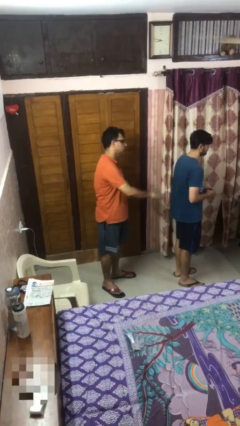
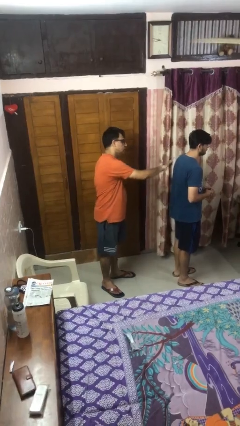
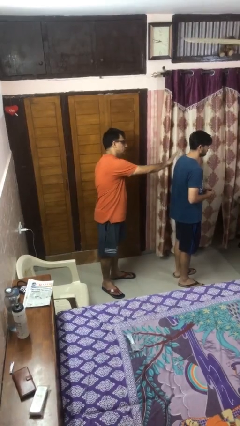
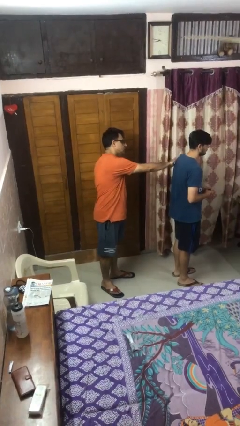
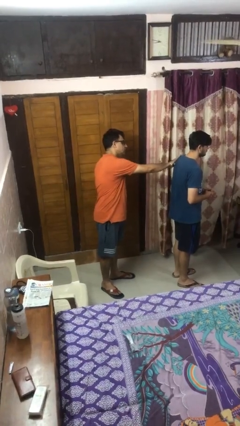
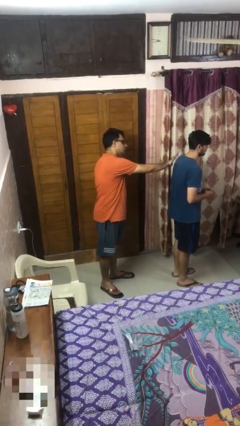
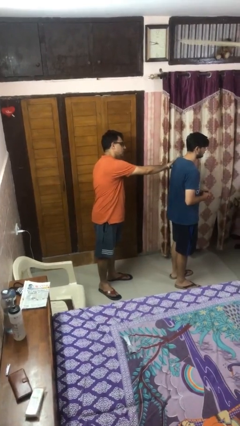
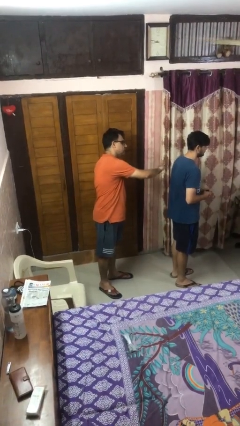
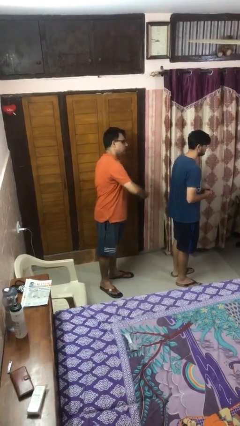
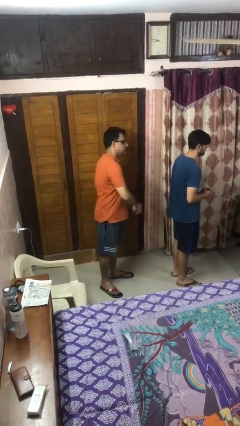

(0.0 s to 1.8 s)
person touches back of person

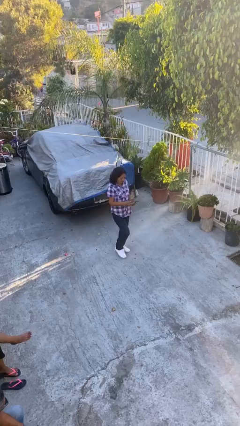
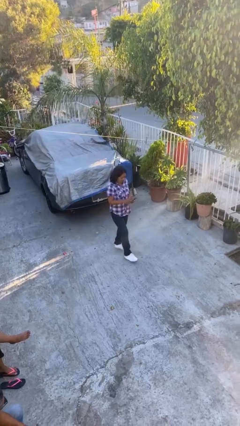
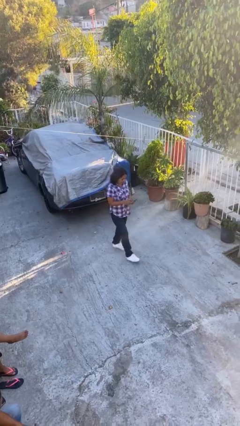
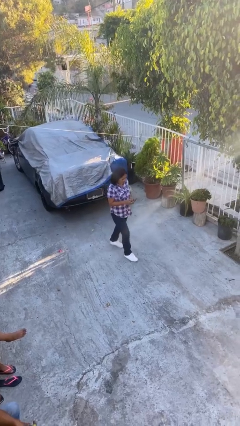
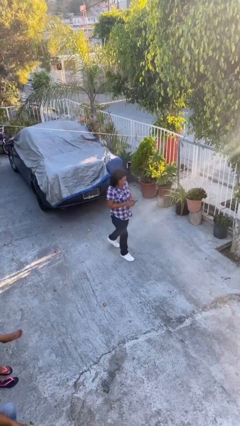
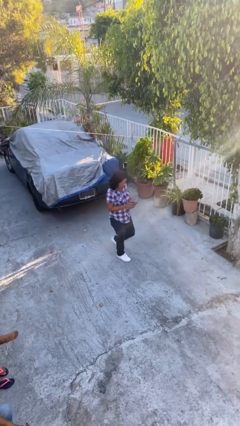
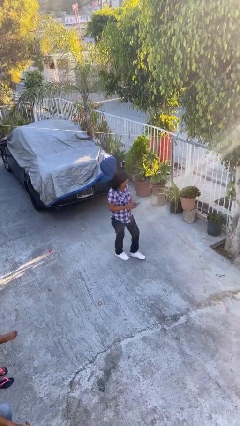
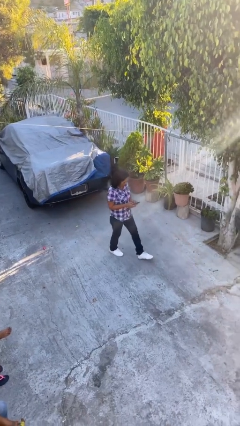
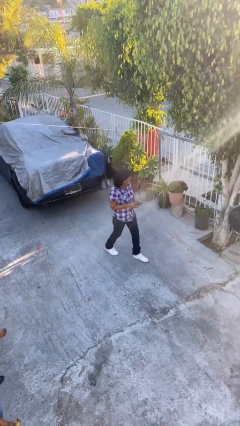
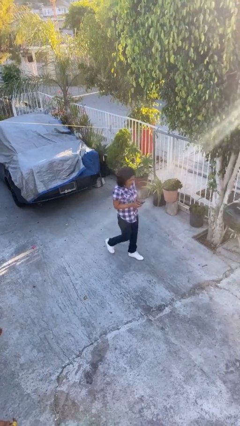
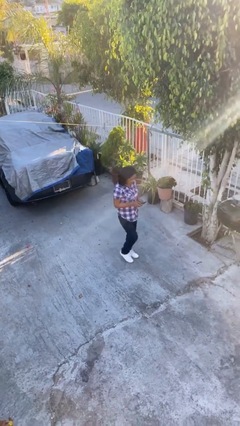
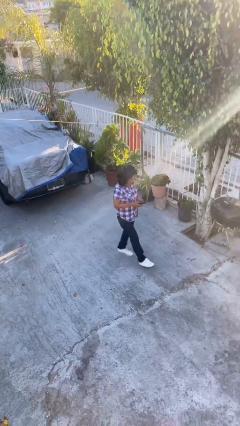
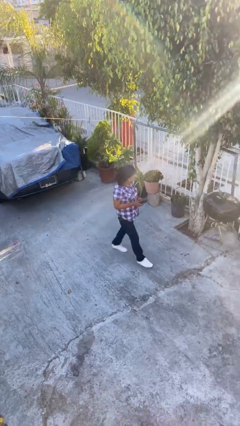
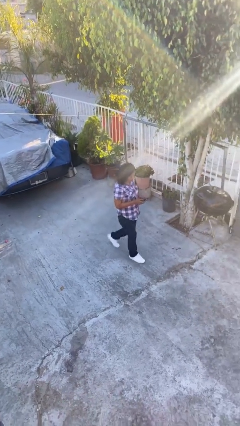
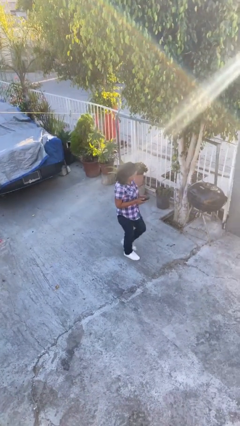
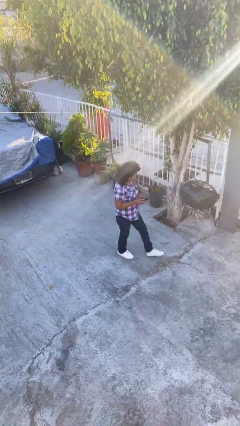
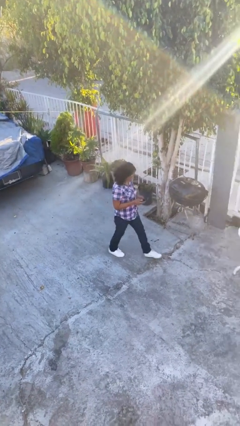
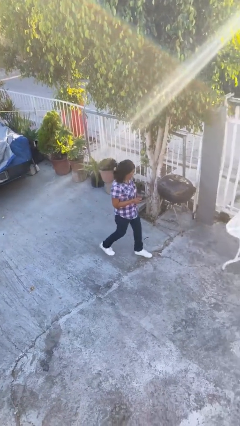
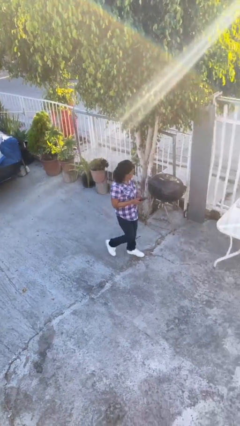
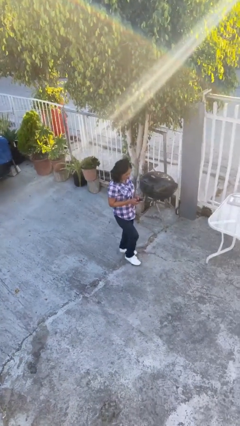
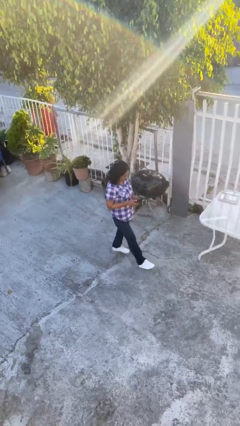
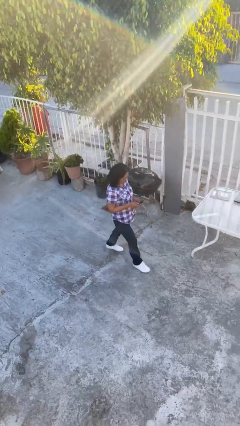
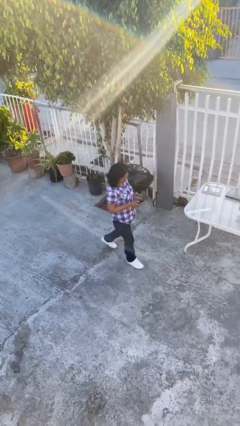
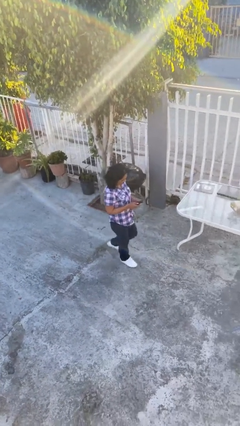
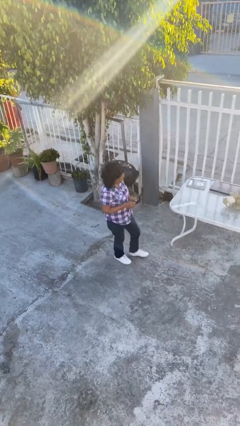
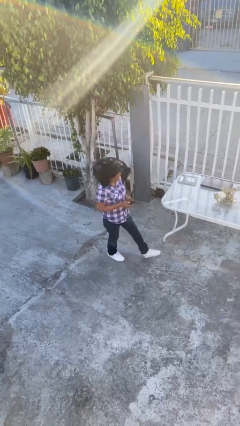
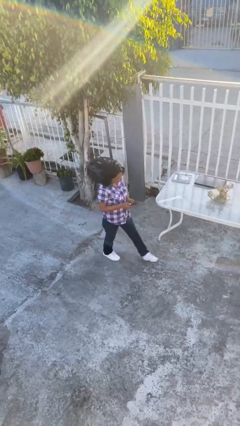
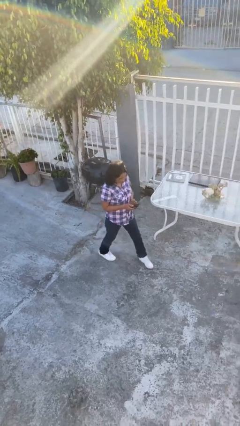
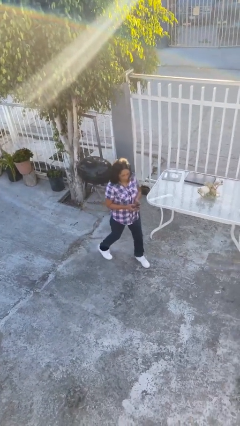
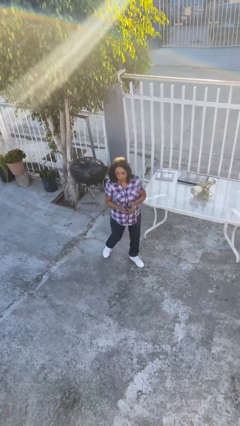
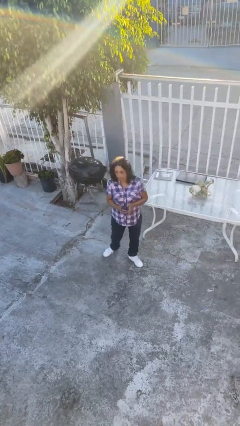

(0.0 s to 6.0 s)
person texts on phone

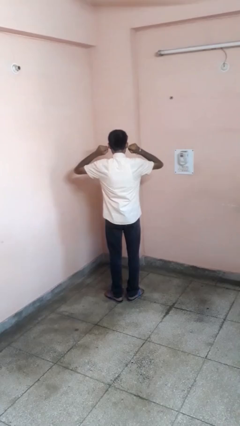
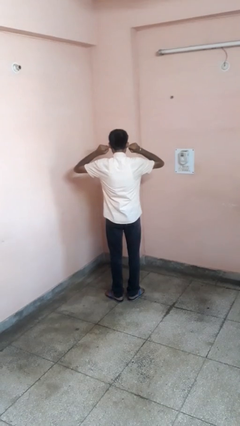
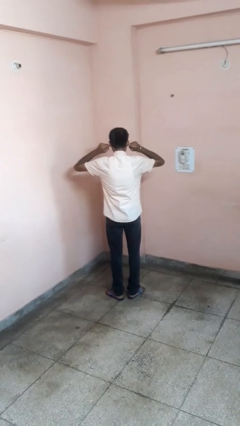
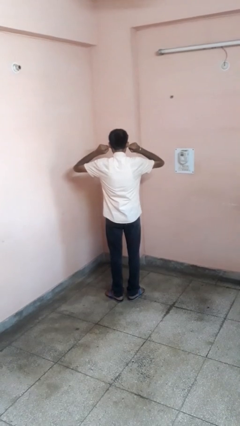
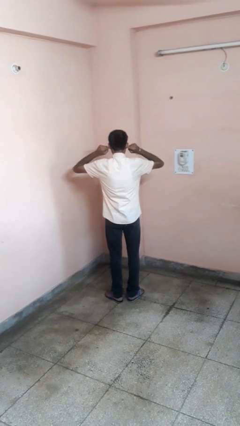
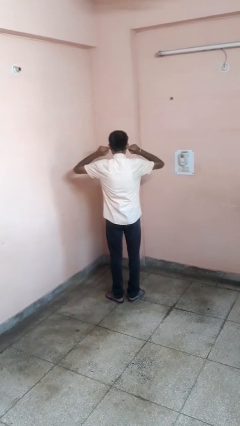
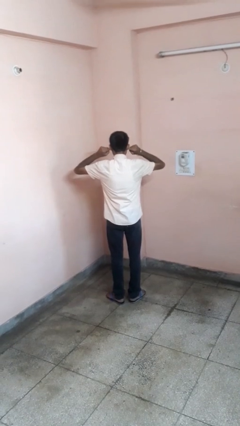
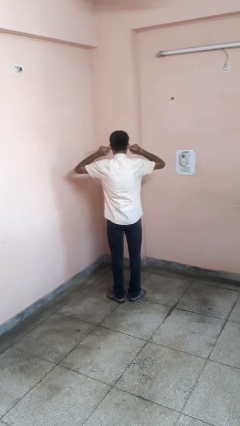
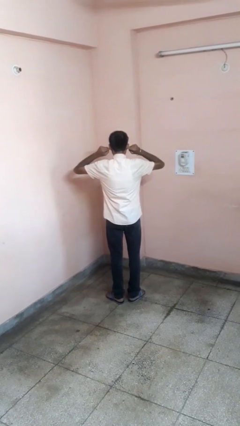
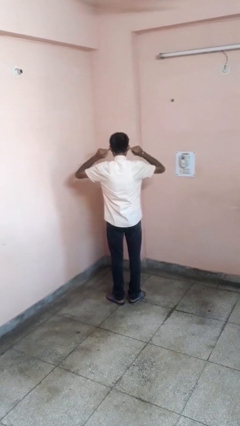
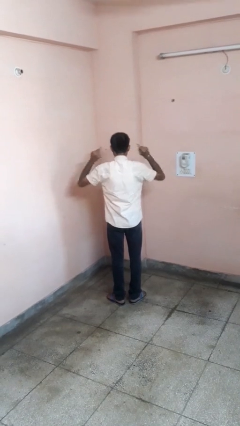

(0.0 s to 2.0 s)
person puts fingers in ear

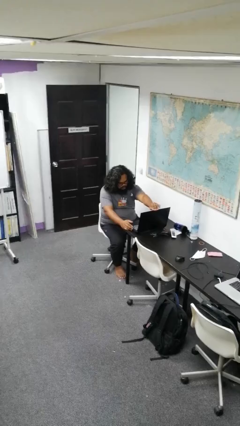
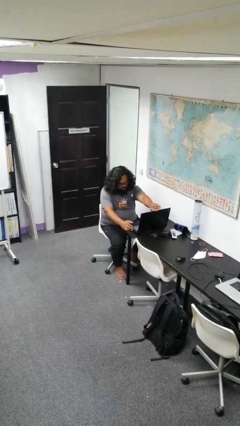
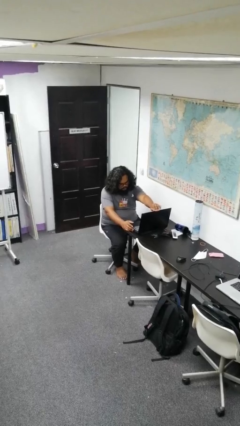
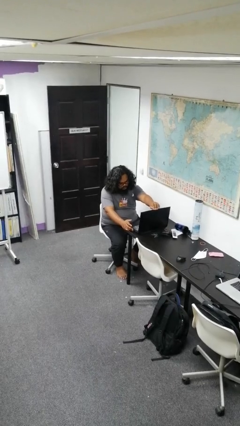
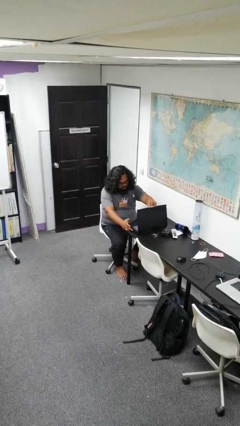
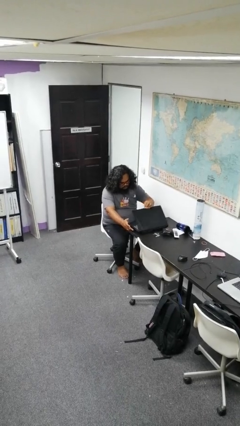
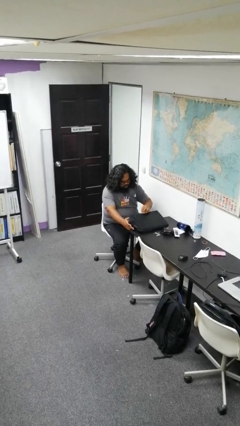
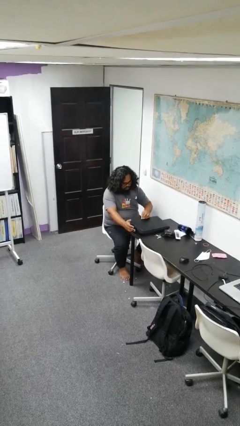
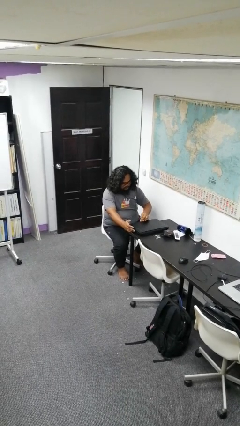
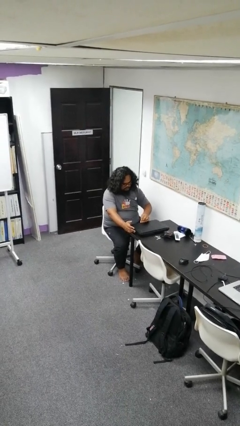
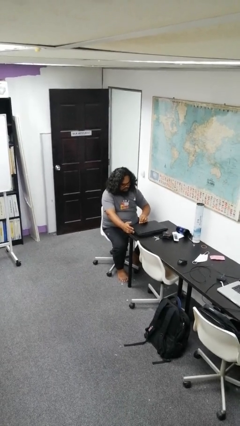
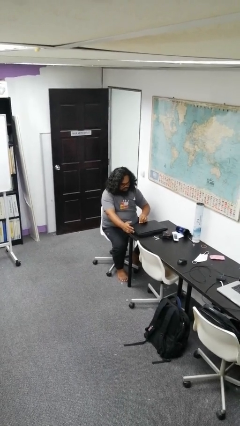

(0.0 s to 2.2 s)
person closes laptop

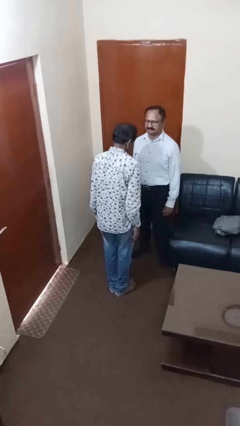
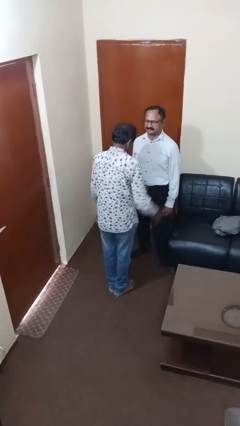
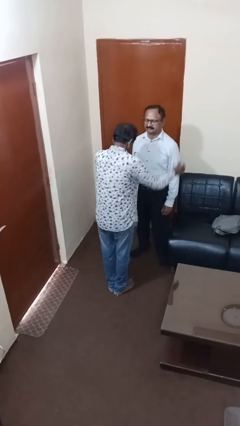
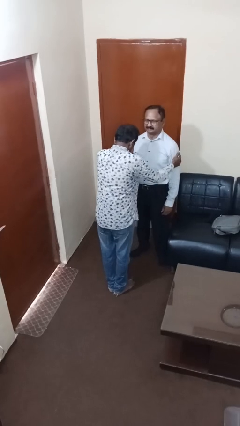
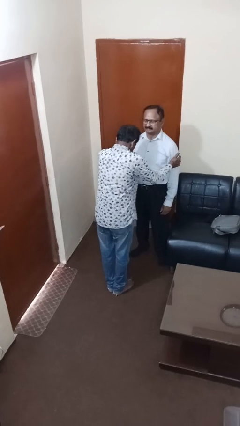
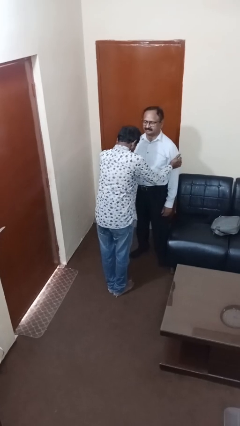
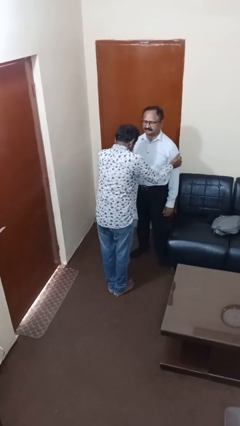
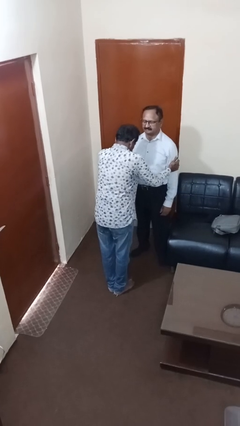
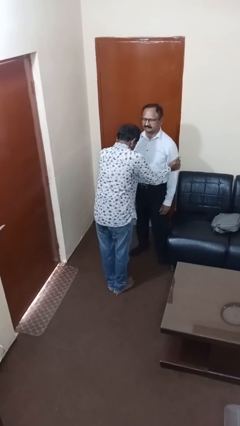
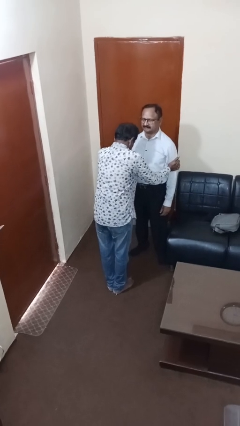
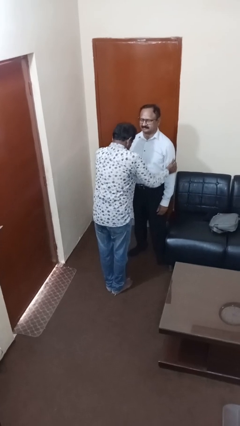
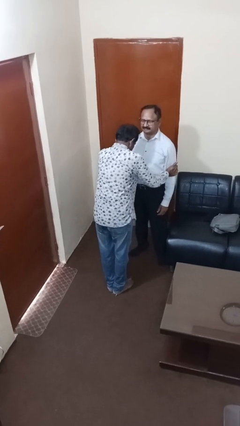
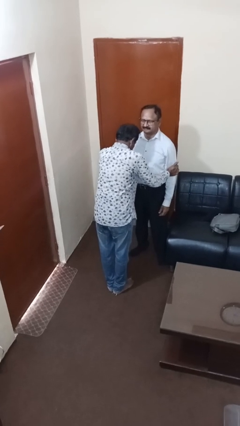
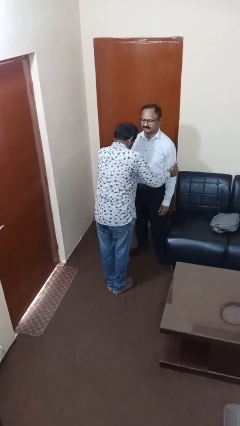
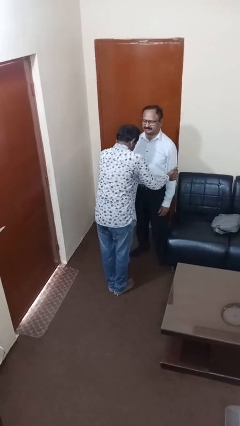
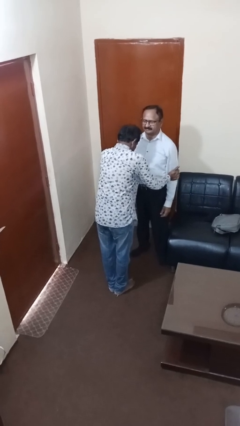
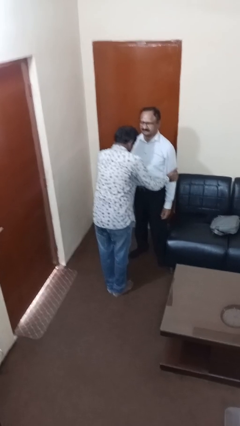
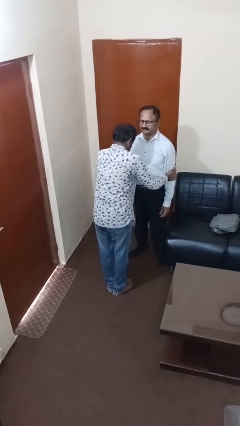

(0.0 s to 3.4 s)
person grabs person by bicep

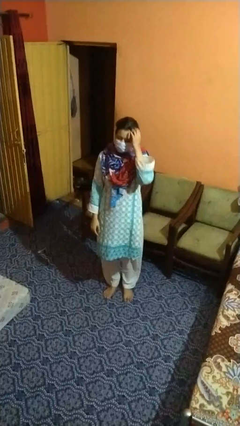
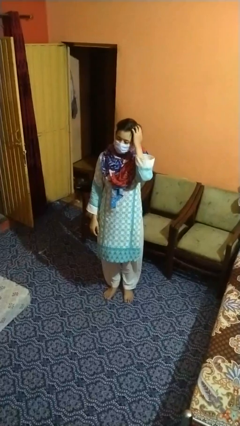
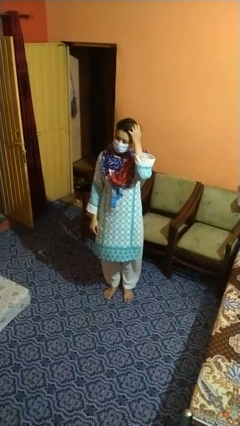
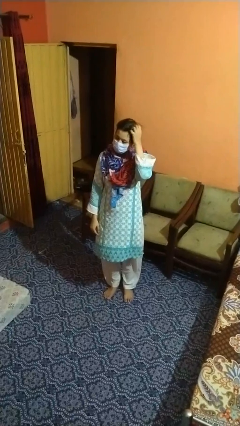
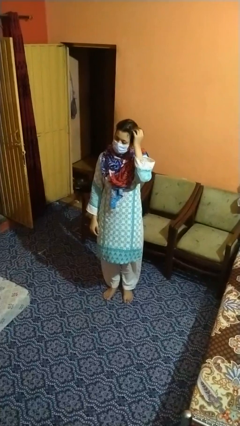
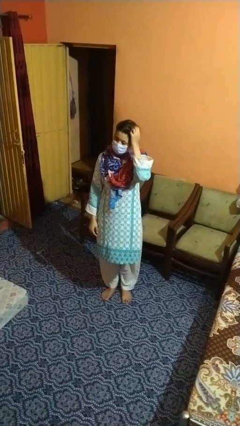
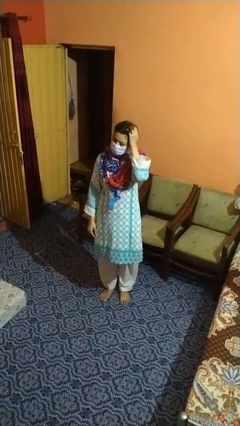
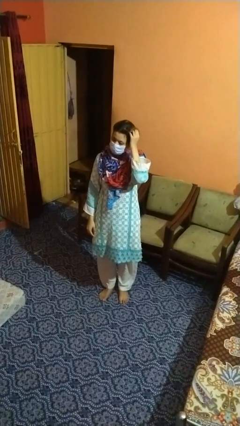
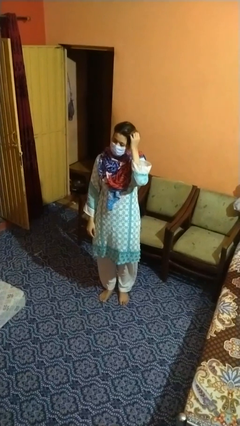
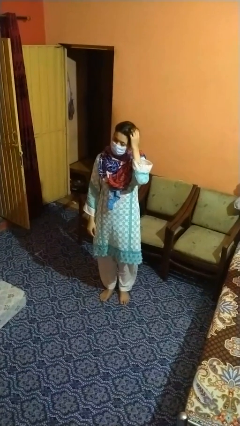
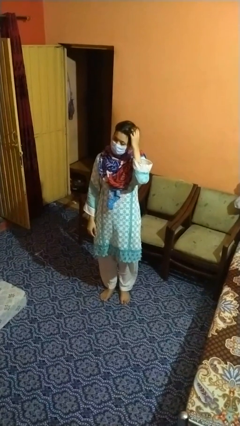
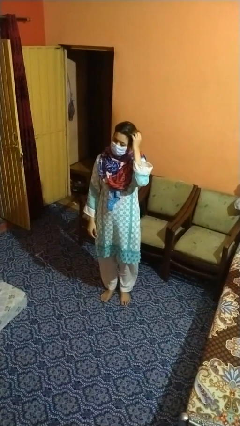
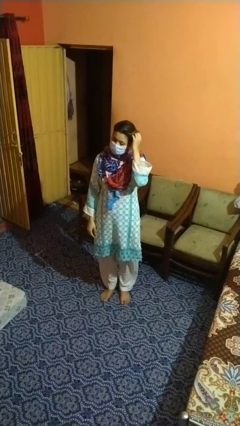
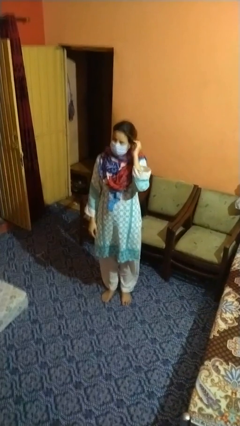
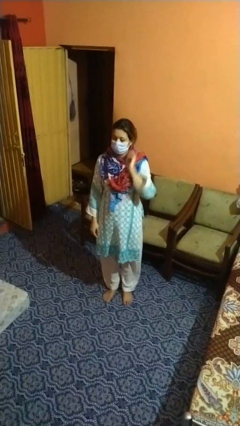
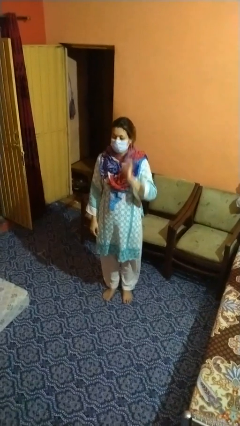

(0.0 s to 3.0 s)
person strokes hair
